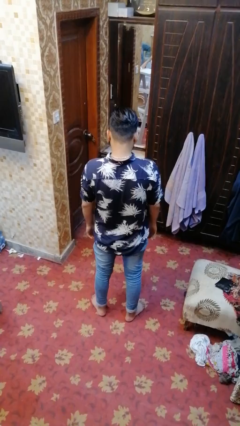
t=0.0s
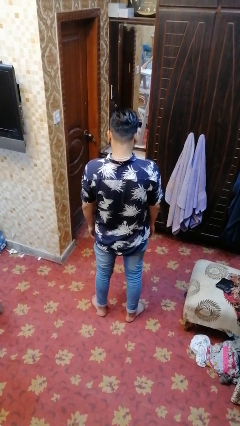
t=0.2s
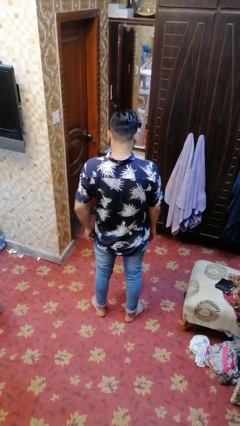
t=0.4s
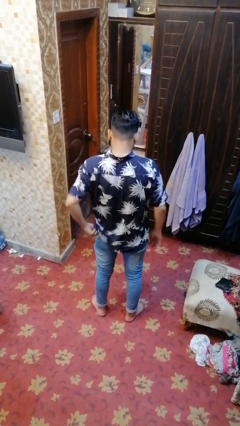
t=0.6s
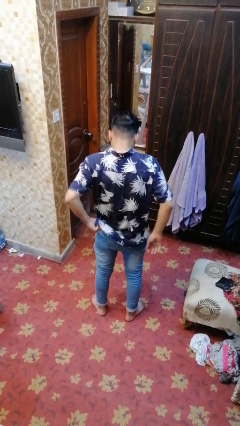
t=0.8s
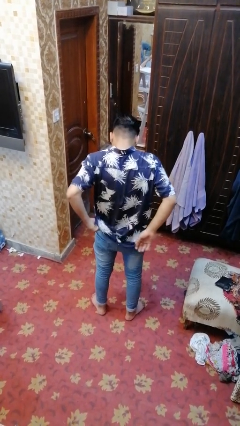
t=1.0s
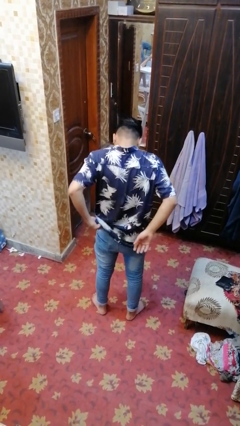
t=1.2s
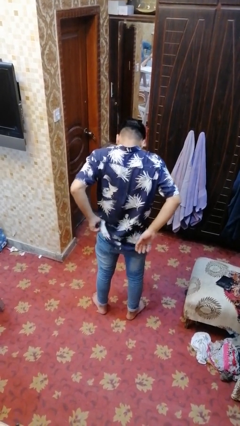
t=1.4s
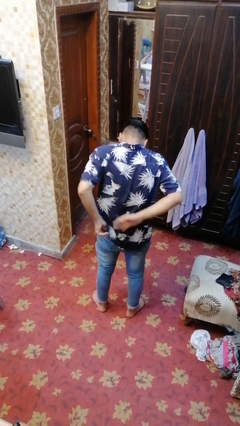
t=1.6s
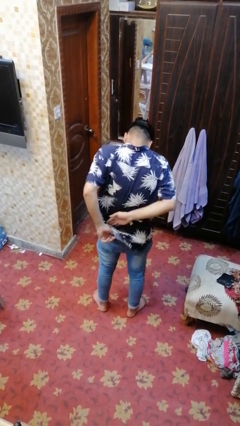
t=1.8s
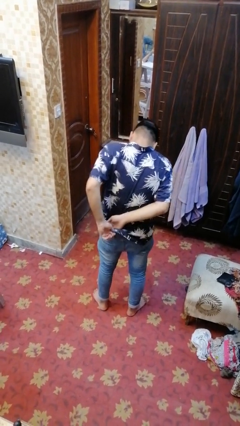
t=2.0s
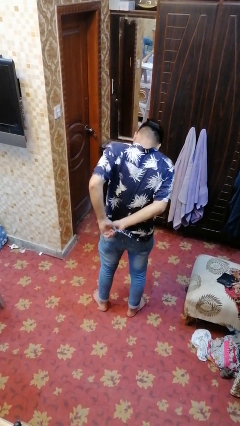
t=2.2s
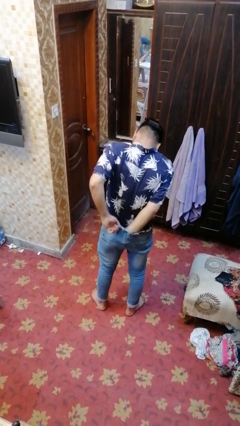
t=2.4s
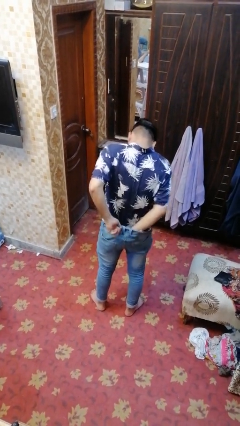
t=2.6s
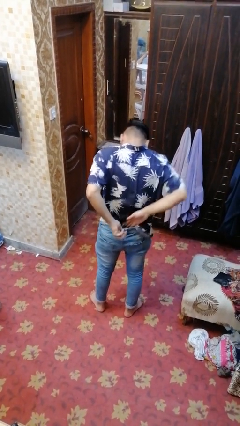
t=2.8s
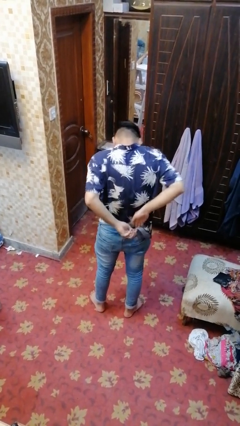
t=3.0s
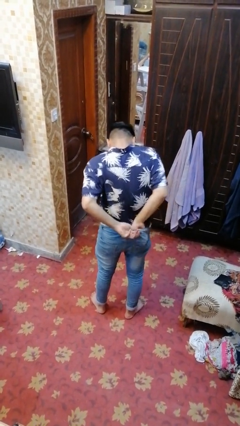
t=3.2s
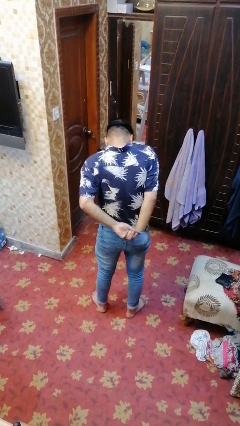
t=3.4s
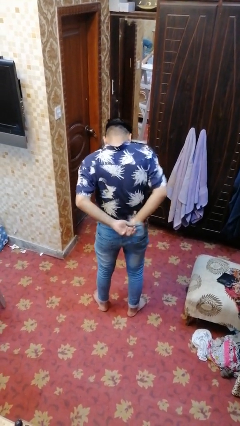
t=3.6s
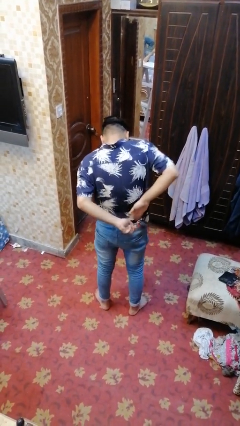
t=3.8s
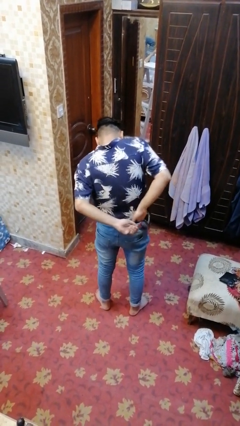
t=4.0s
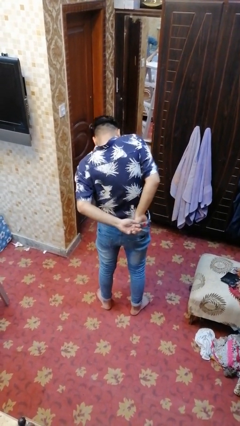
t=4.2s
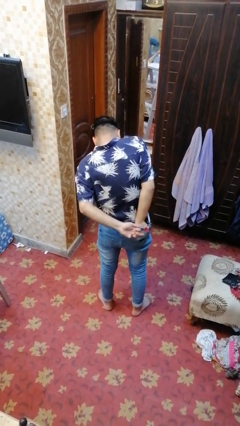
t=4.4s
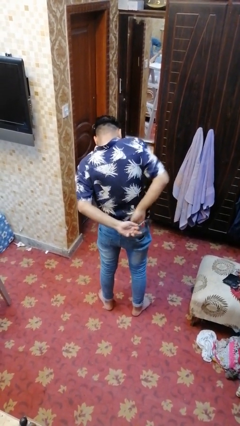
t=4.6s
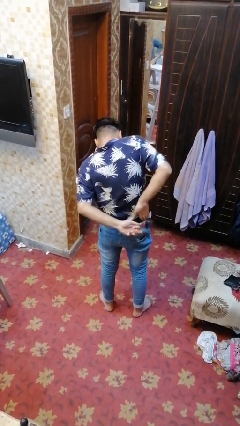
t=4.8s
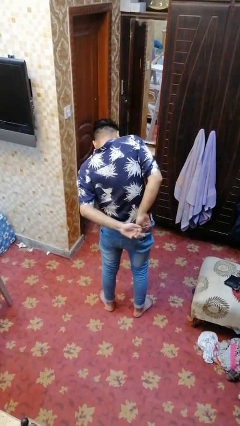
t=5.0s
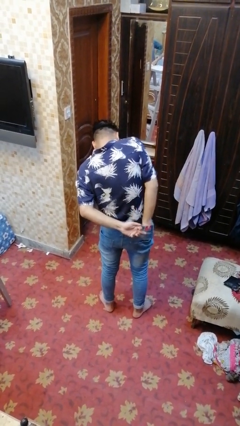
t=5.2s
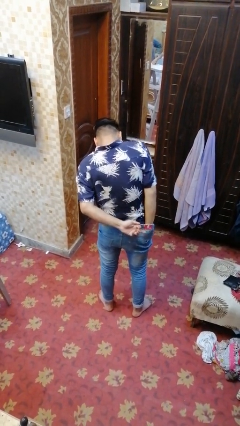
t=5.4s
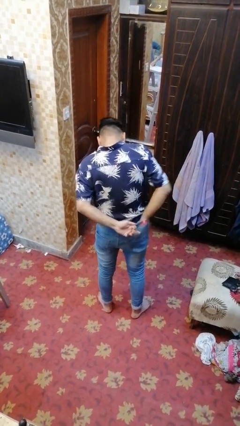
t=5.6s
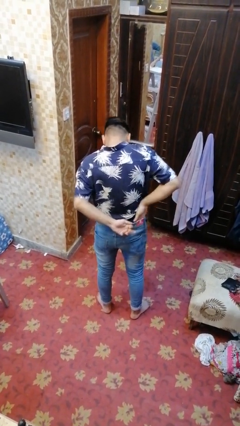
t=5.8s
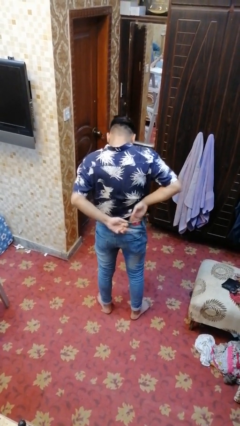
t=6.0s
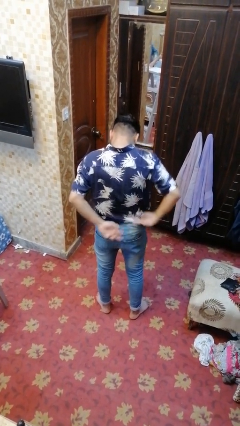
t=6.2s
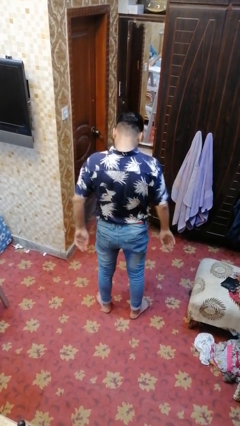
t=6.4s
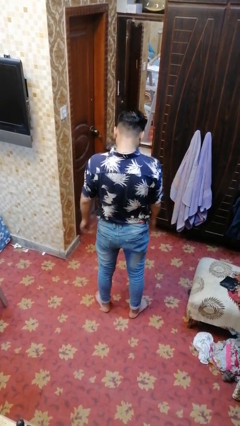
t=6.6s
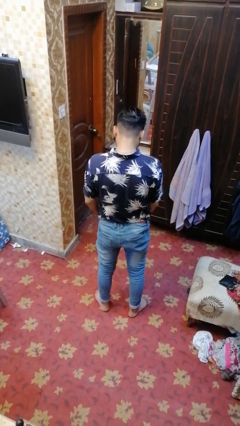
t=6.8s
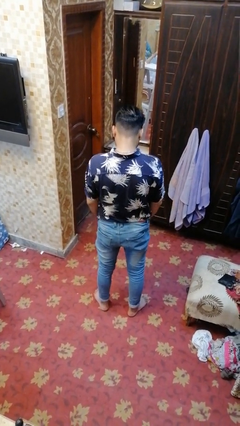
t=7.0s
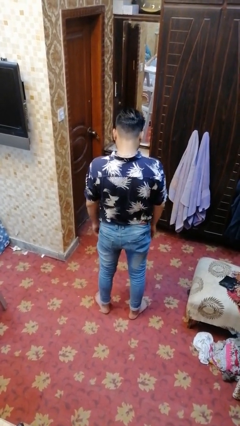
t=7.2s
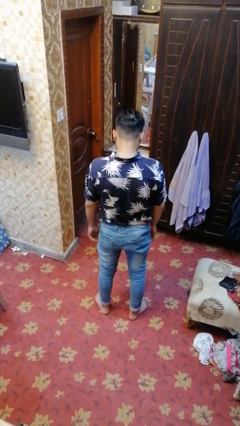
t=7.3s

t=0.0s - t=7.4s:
person tucks in shirt

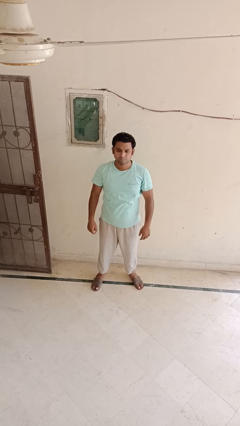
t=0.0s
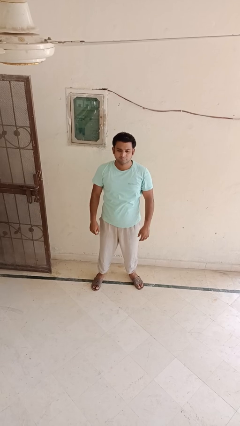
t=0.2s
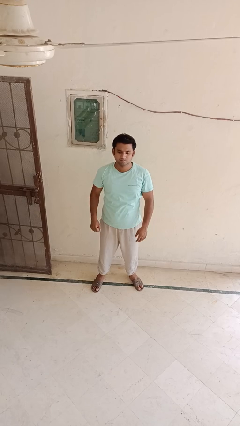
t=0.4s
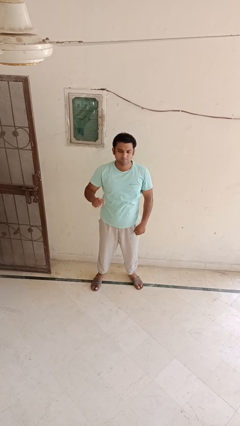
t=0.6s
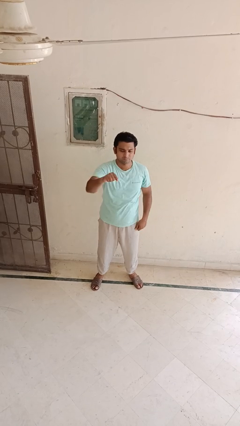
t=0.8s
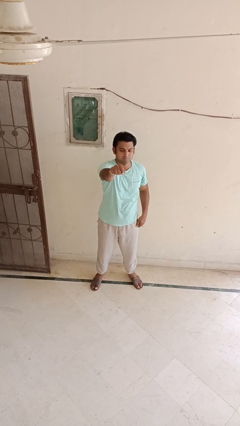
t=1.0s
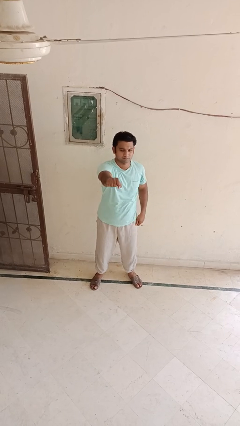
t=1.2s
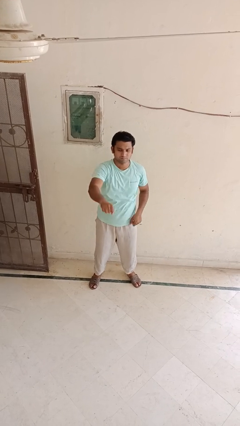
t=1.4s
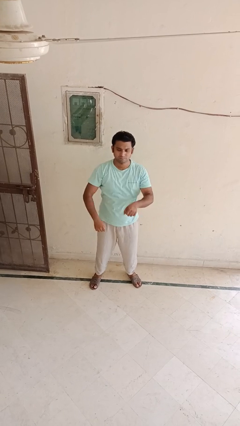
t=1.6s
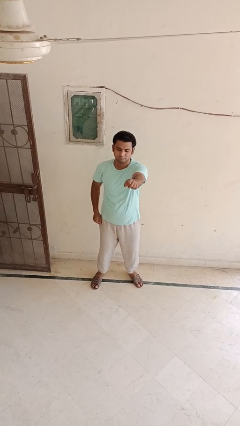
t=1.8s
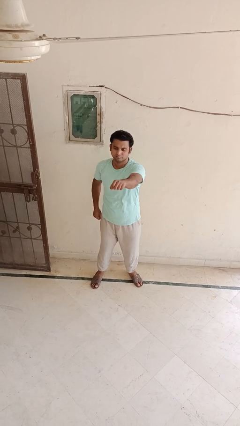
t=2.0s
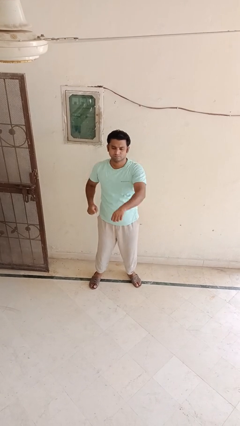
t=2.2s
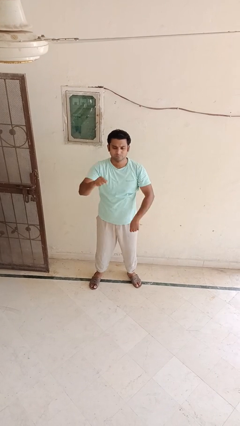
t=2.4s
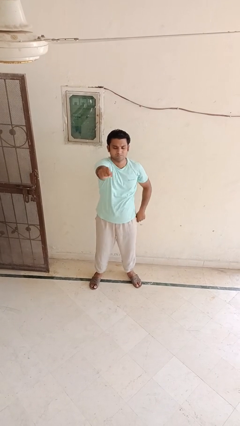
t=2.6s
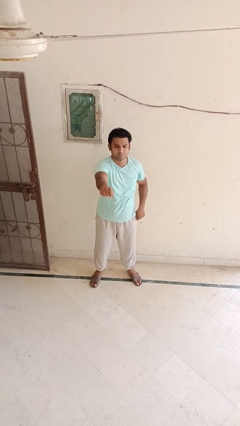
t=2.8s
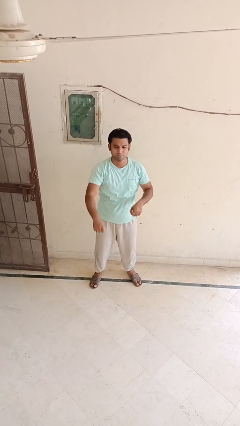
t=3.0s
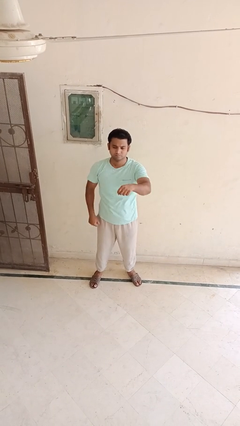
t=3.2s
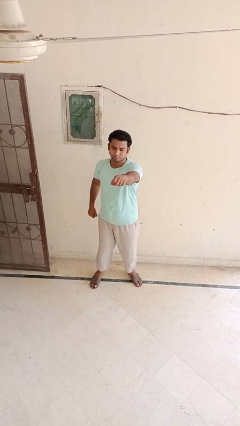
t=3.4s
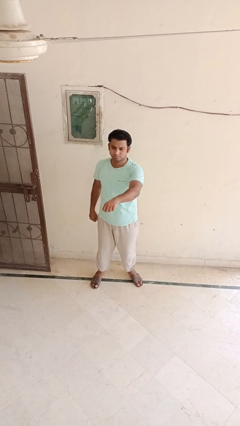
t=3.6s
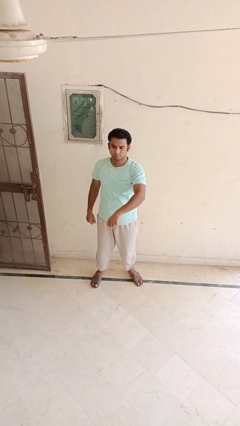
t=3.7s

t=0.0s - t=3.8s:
person punches

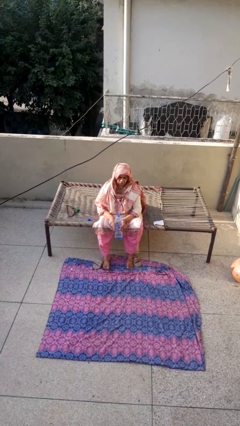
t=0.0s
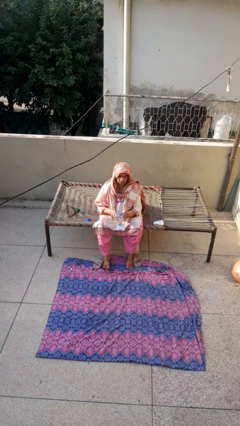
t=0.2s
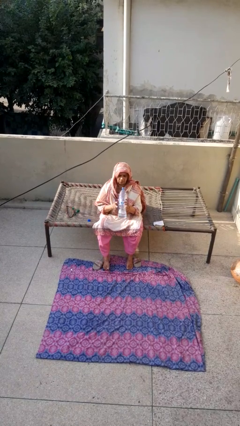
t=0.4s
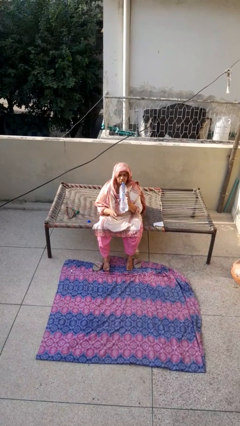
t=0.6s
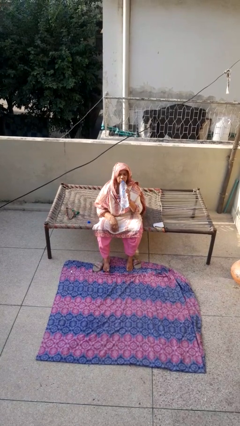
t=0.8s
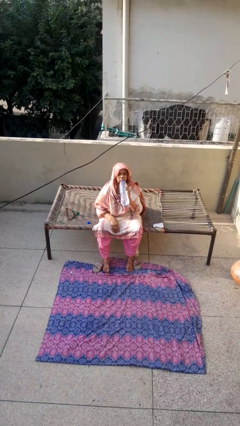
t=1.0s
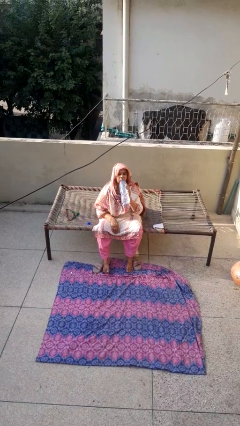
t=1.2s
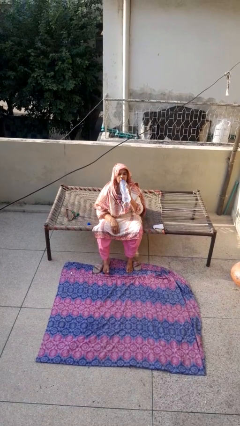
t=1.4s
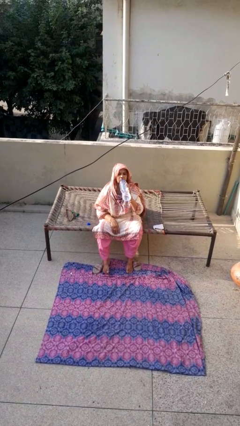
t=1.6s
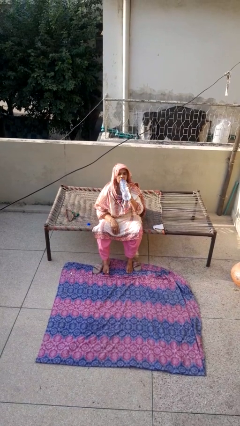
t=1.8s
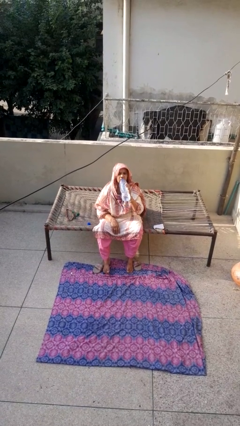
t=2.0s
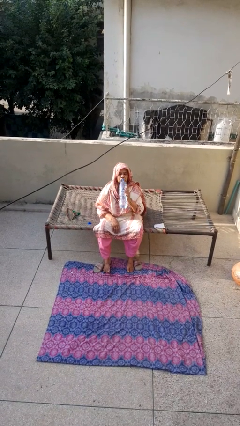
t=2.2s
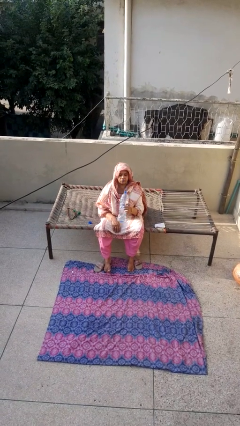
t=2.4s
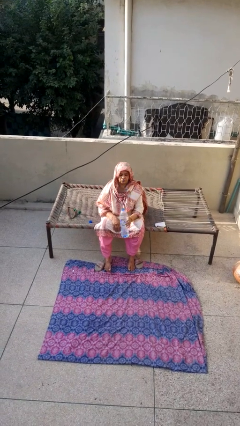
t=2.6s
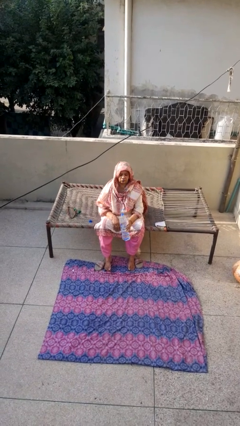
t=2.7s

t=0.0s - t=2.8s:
person drinks from bottle

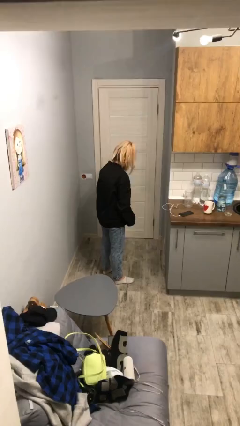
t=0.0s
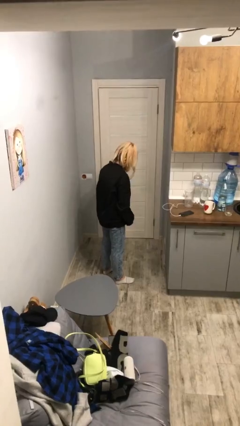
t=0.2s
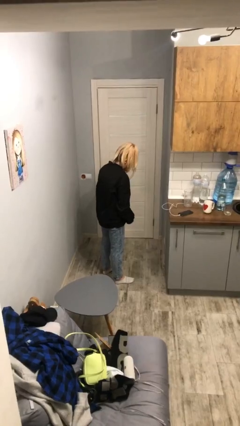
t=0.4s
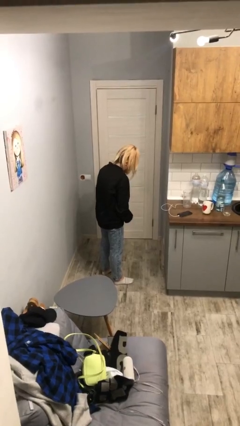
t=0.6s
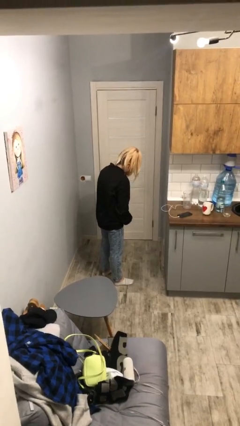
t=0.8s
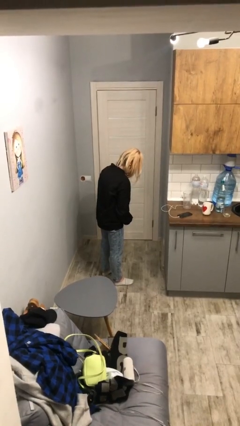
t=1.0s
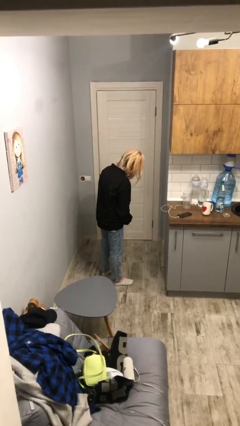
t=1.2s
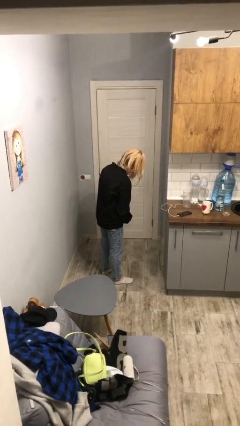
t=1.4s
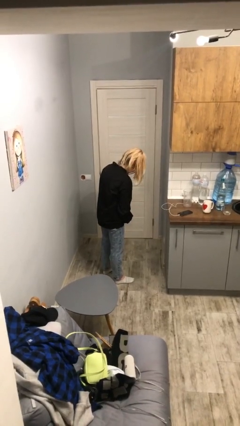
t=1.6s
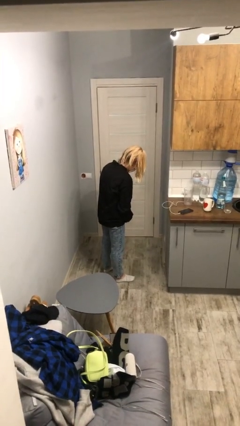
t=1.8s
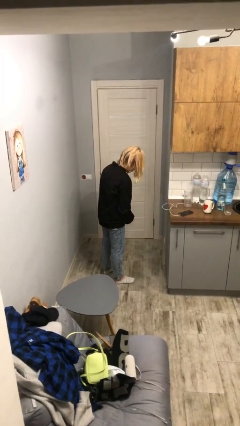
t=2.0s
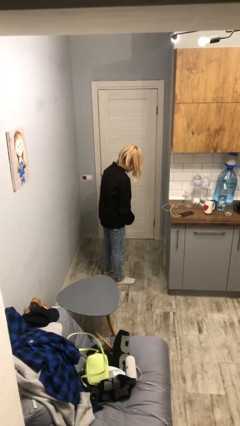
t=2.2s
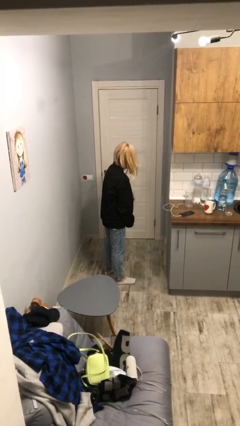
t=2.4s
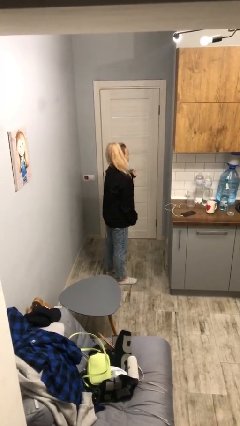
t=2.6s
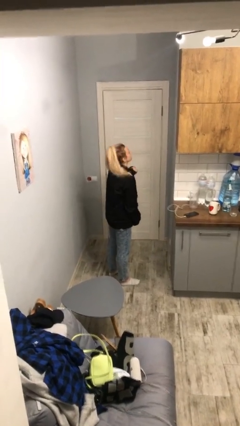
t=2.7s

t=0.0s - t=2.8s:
person zips up jacket

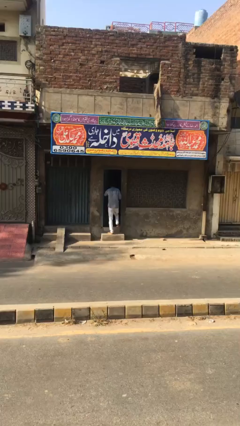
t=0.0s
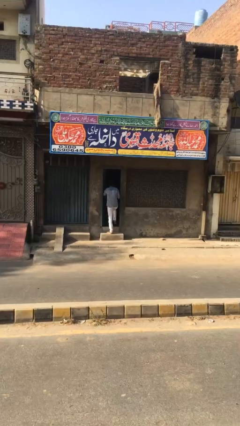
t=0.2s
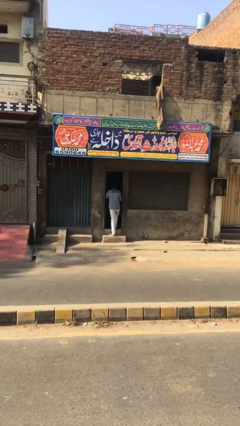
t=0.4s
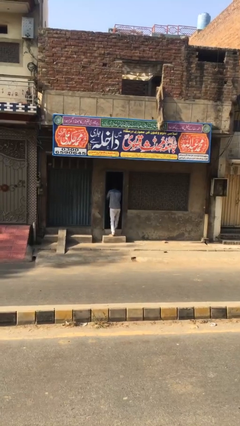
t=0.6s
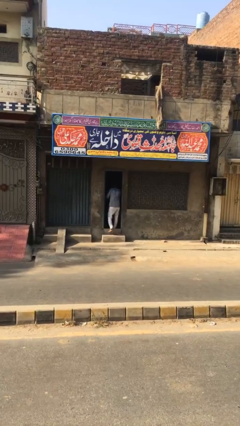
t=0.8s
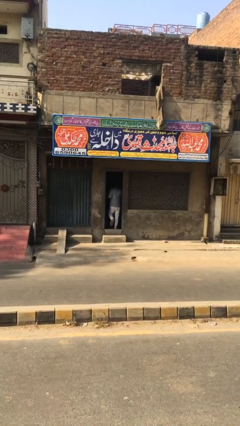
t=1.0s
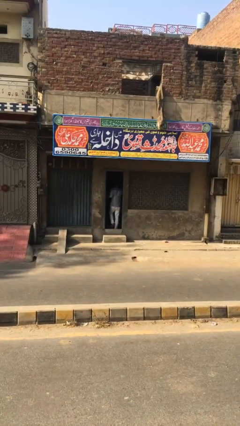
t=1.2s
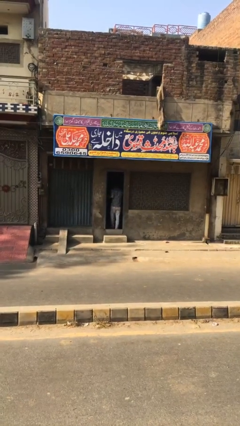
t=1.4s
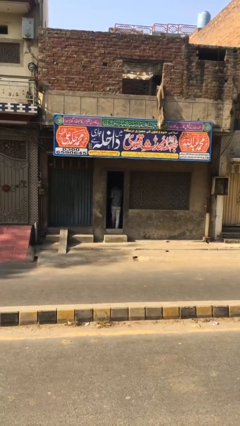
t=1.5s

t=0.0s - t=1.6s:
person exits scene through structure
